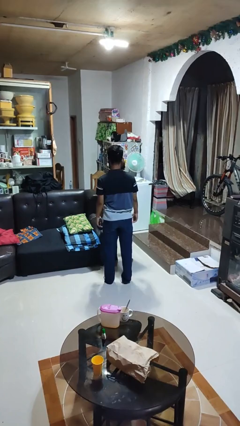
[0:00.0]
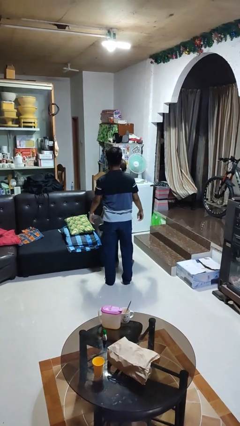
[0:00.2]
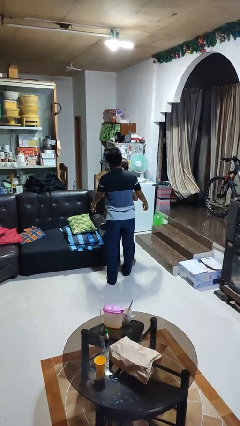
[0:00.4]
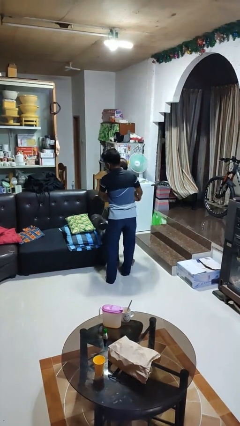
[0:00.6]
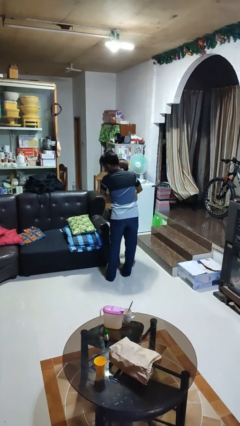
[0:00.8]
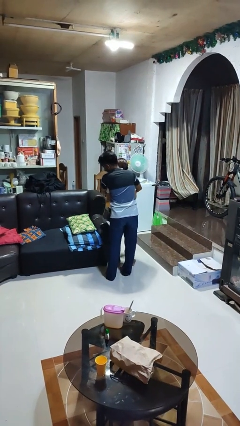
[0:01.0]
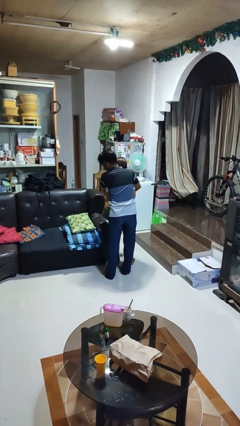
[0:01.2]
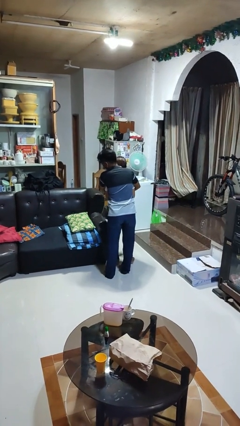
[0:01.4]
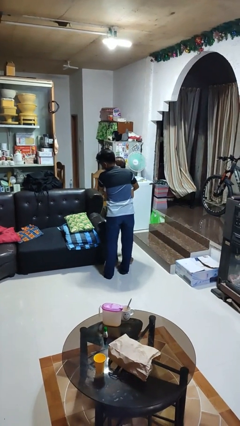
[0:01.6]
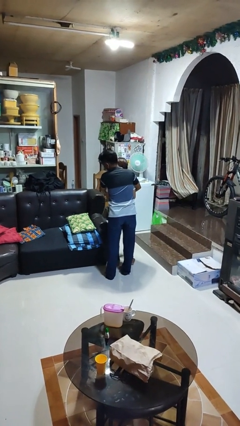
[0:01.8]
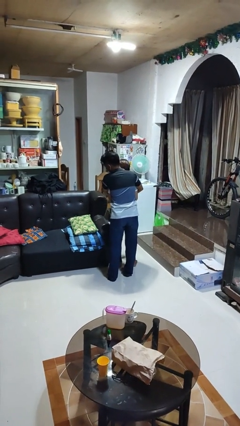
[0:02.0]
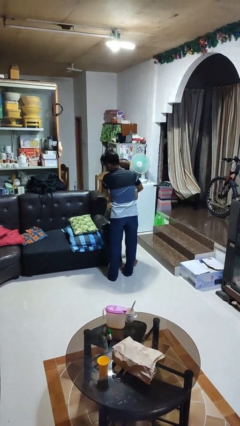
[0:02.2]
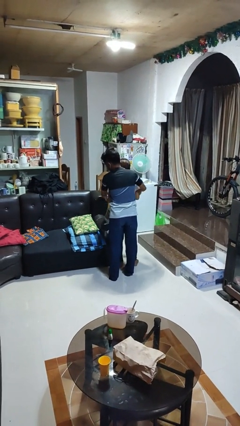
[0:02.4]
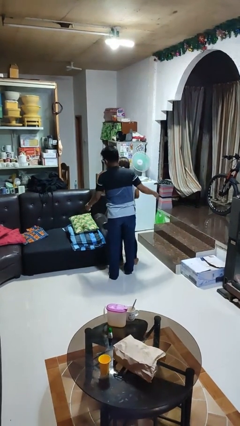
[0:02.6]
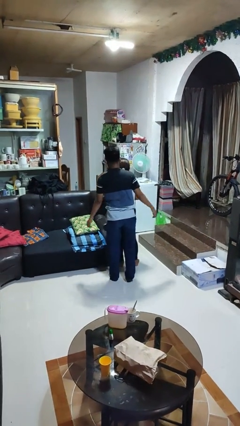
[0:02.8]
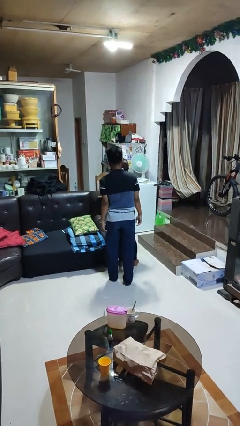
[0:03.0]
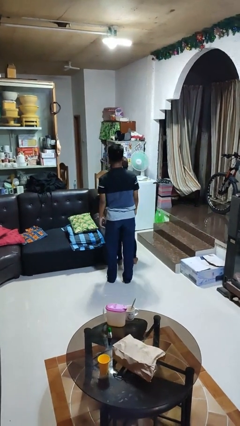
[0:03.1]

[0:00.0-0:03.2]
person hugs person from behind

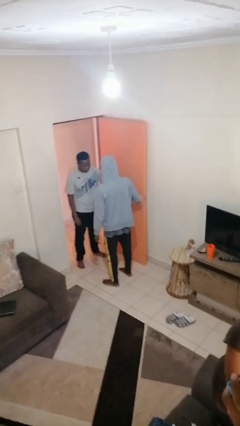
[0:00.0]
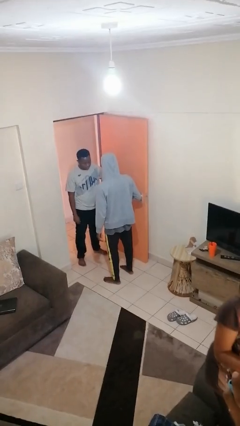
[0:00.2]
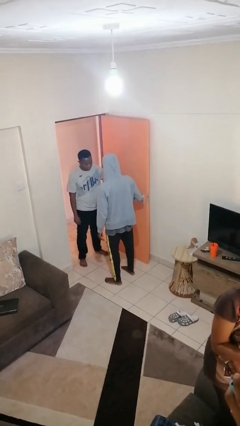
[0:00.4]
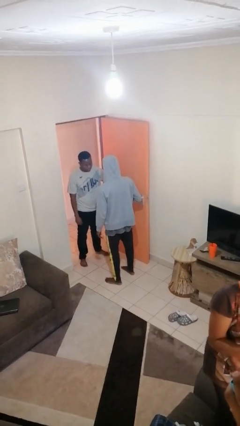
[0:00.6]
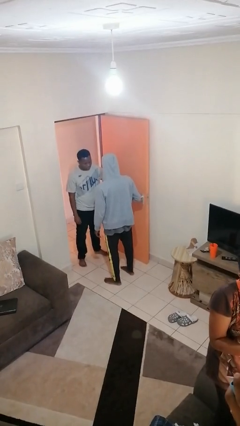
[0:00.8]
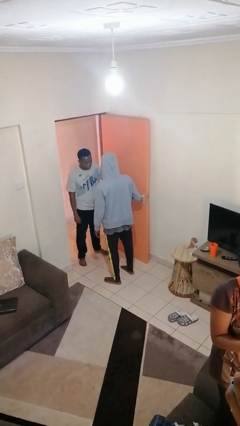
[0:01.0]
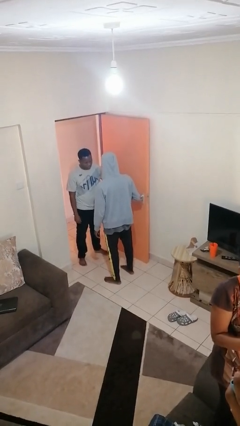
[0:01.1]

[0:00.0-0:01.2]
person grabs person by forearm

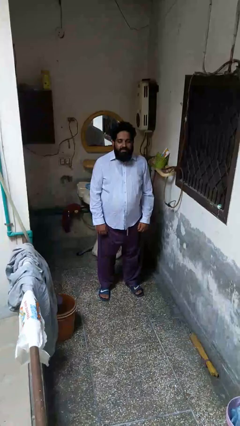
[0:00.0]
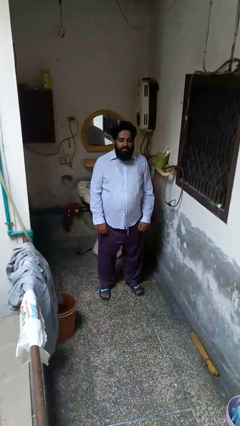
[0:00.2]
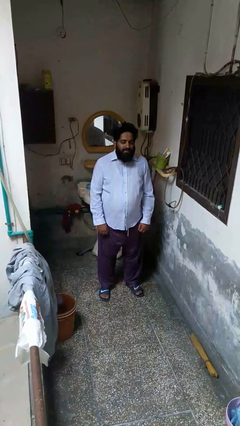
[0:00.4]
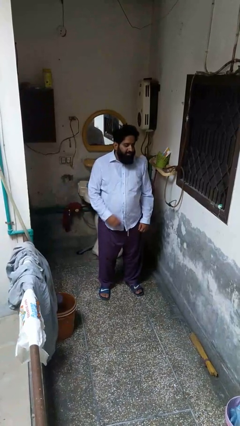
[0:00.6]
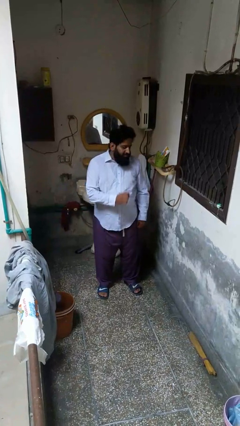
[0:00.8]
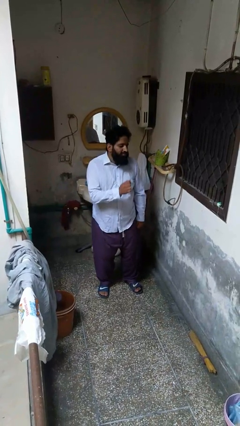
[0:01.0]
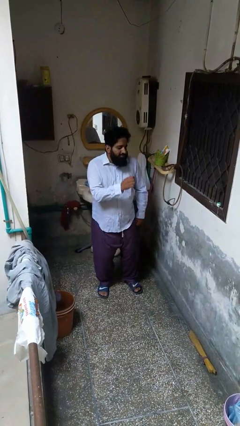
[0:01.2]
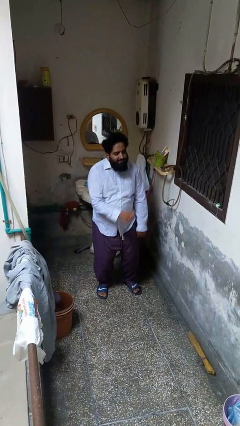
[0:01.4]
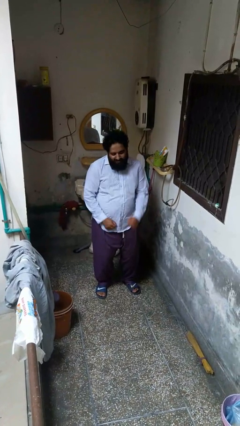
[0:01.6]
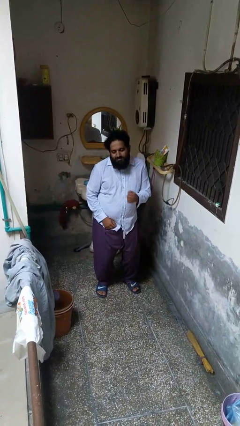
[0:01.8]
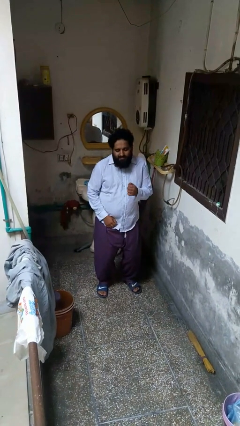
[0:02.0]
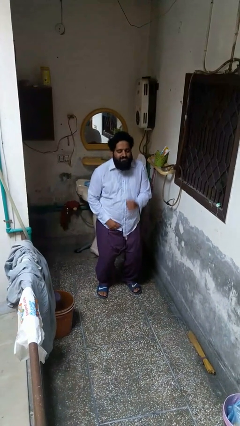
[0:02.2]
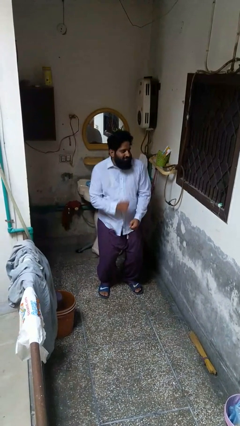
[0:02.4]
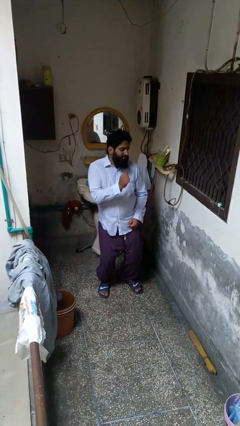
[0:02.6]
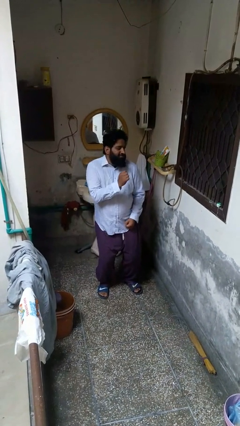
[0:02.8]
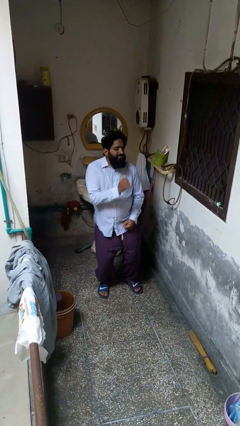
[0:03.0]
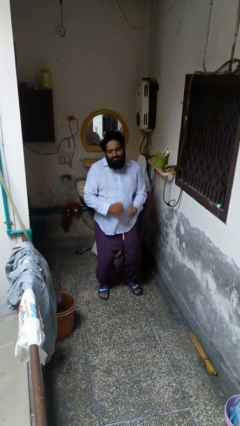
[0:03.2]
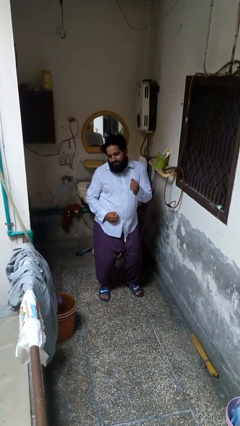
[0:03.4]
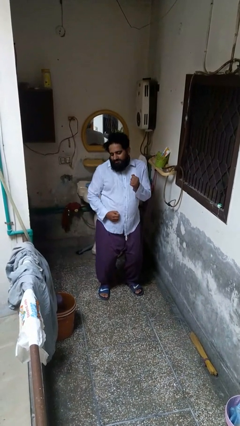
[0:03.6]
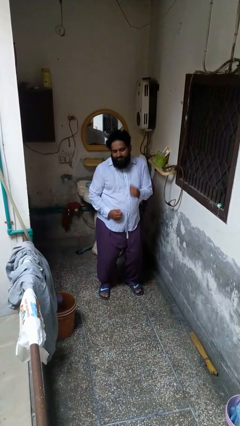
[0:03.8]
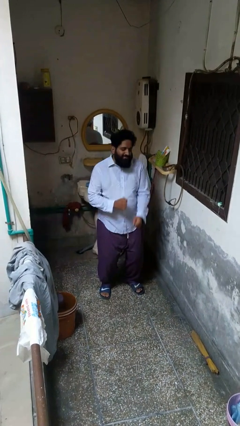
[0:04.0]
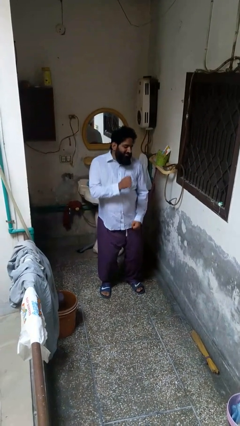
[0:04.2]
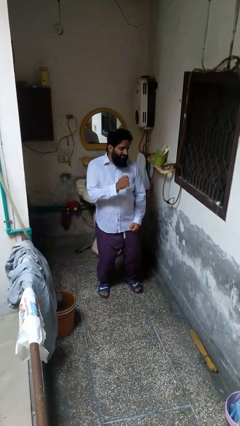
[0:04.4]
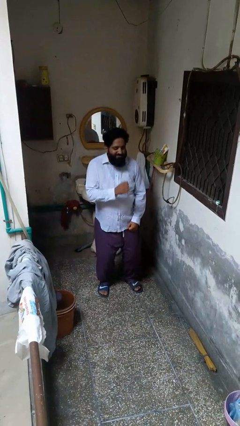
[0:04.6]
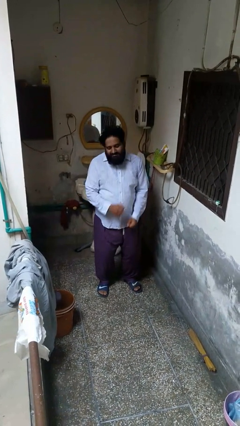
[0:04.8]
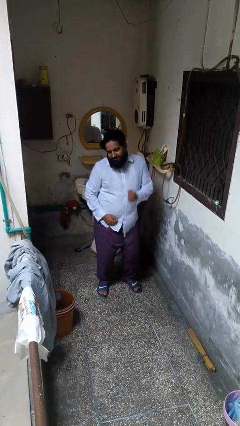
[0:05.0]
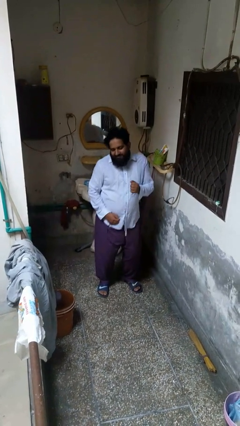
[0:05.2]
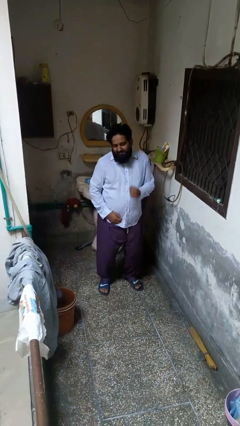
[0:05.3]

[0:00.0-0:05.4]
person dances in place

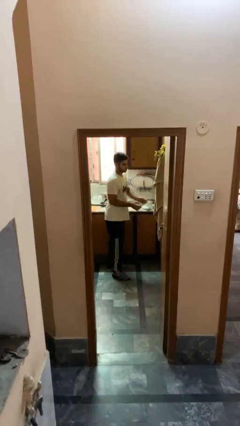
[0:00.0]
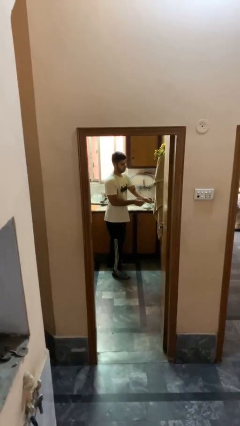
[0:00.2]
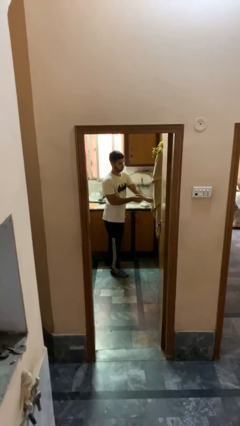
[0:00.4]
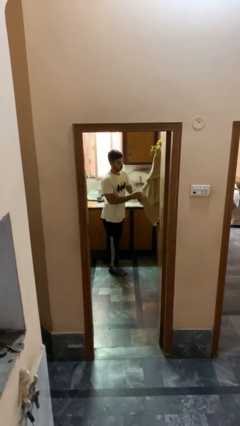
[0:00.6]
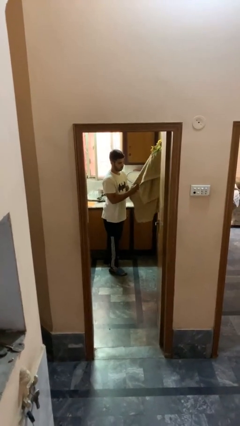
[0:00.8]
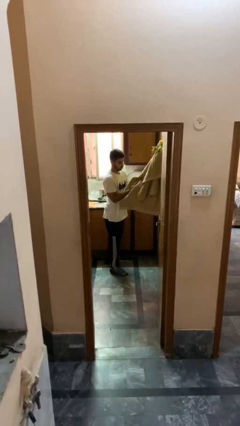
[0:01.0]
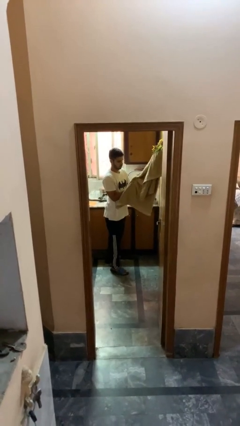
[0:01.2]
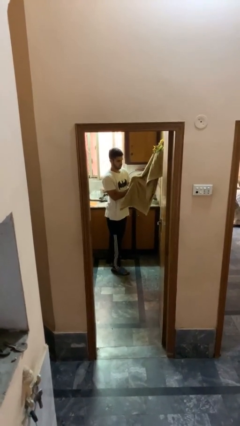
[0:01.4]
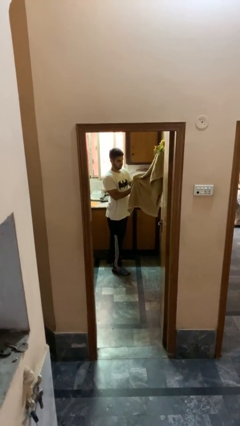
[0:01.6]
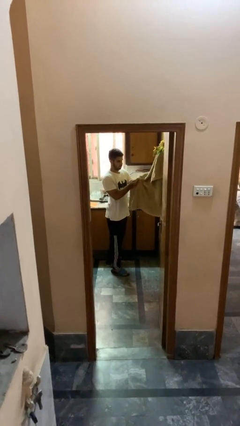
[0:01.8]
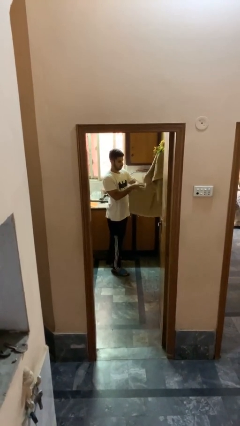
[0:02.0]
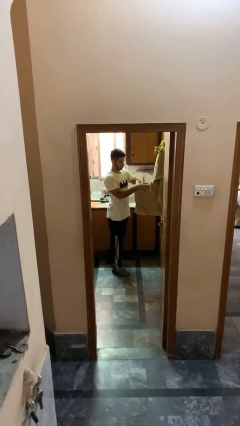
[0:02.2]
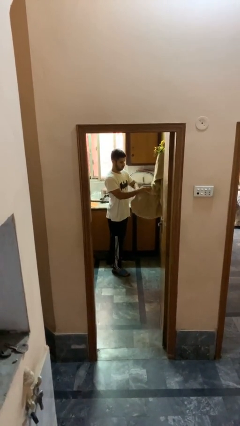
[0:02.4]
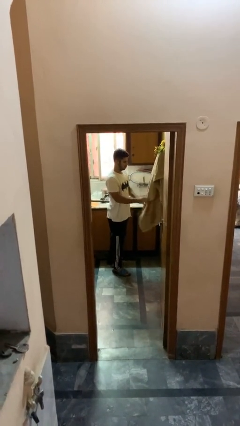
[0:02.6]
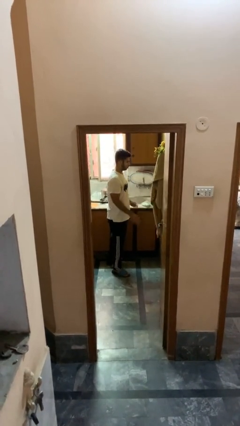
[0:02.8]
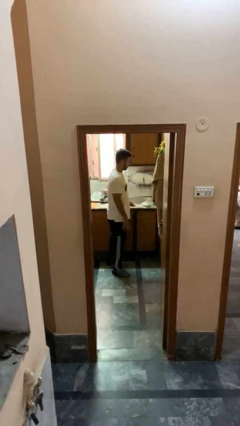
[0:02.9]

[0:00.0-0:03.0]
person dries hands with towel

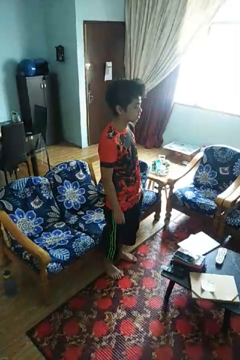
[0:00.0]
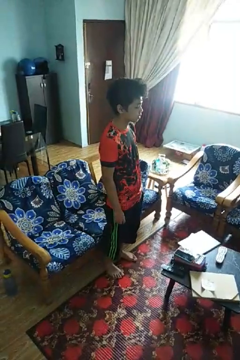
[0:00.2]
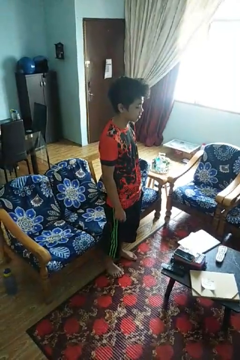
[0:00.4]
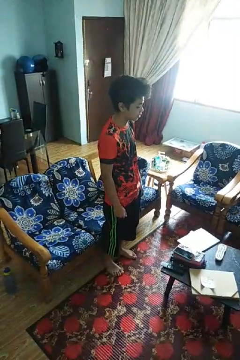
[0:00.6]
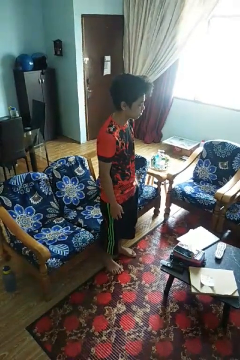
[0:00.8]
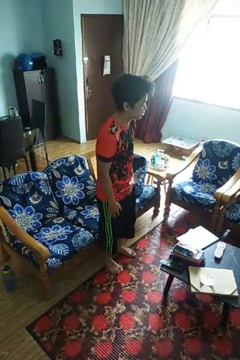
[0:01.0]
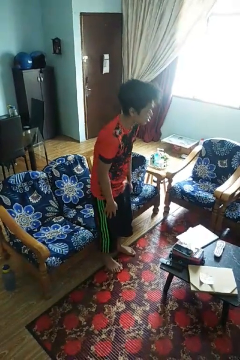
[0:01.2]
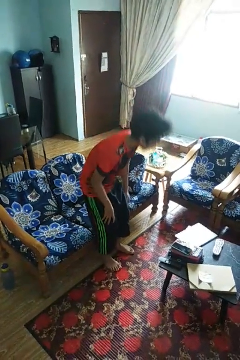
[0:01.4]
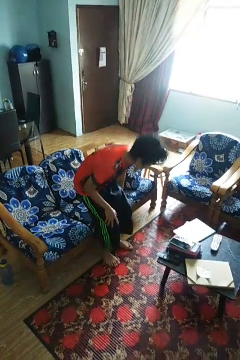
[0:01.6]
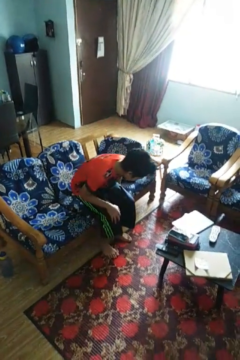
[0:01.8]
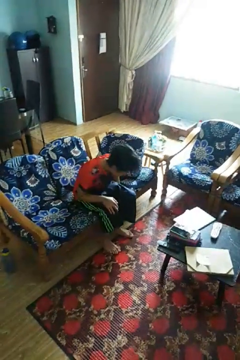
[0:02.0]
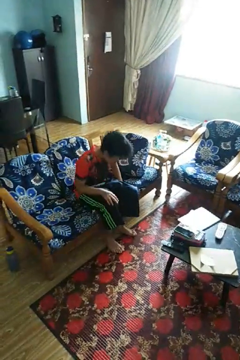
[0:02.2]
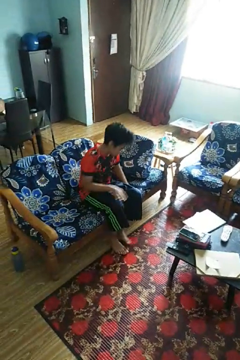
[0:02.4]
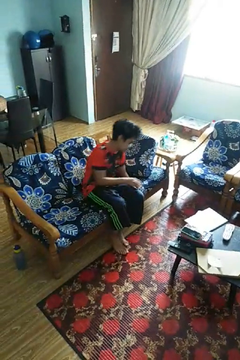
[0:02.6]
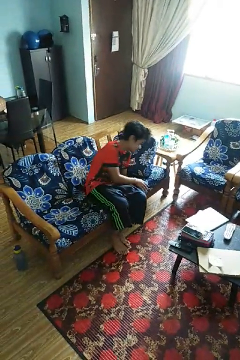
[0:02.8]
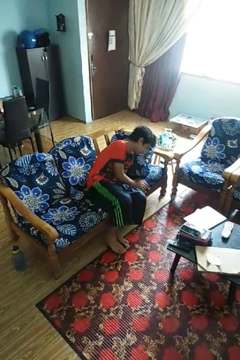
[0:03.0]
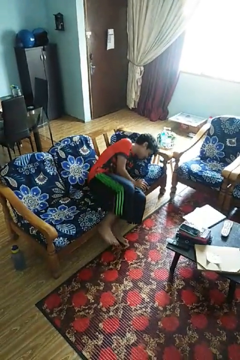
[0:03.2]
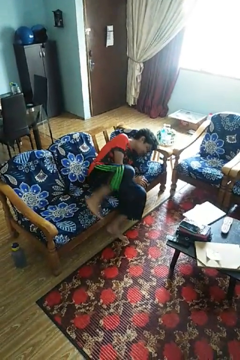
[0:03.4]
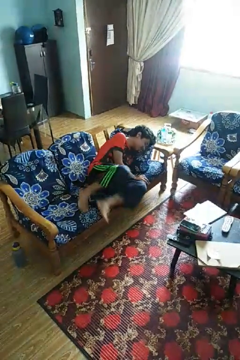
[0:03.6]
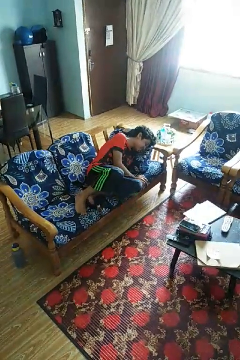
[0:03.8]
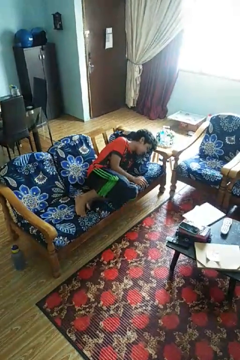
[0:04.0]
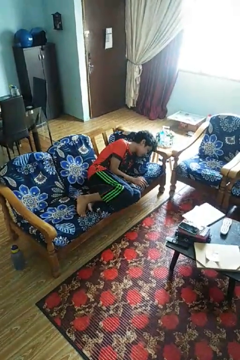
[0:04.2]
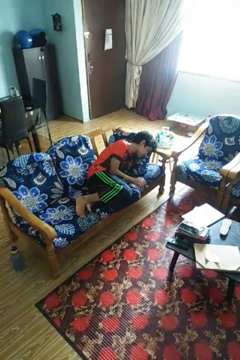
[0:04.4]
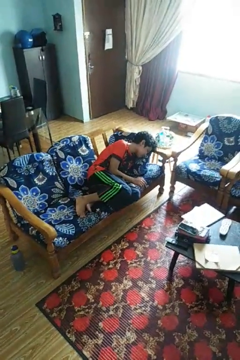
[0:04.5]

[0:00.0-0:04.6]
person lies down on couch

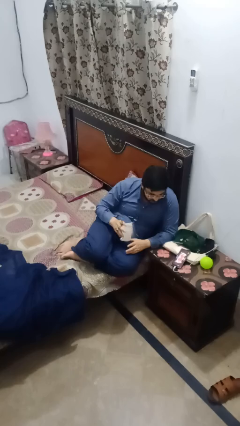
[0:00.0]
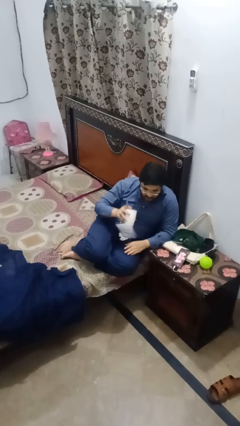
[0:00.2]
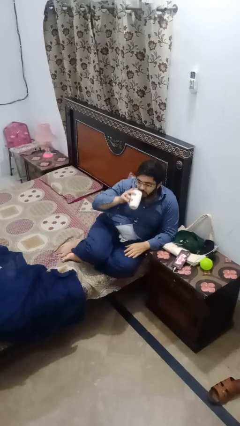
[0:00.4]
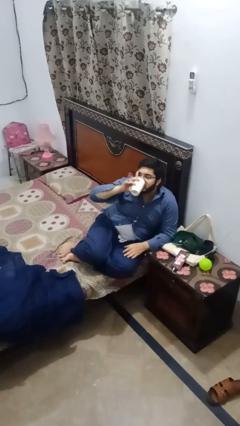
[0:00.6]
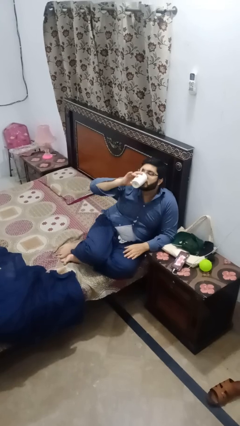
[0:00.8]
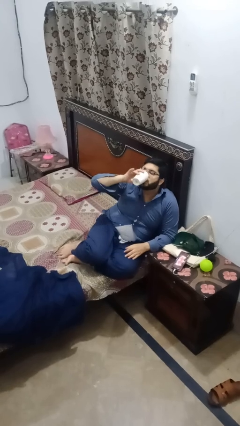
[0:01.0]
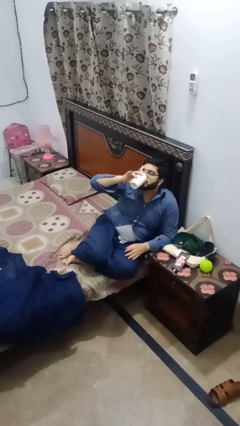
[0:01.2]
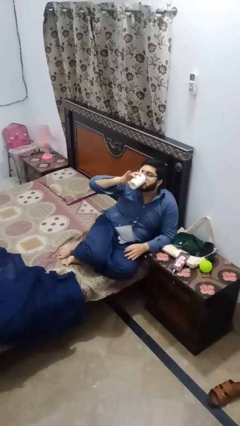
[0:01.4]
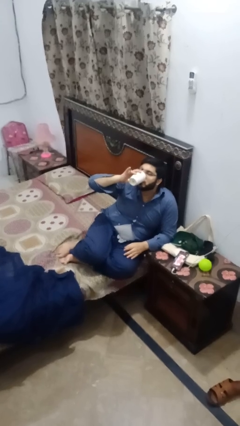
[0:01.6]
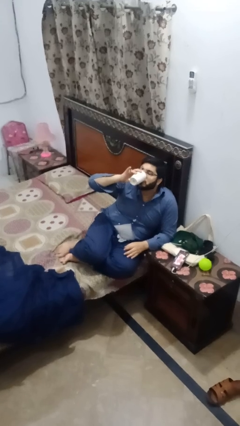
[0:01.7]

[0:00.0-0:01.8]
person drinks from mug
